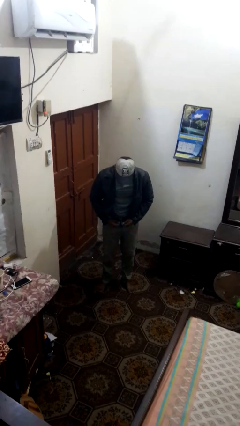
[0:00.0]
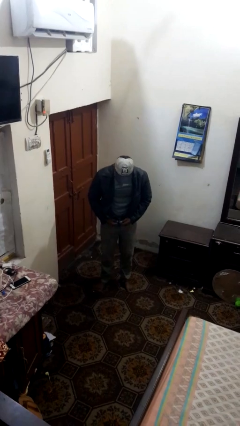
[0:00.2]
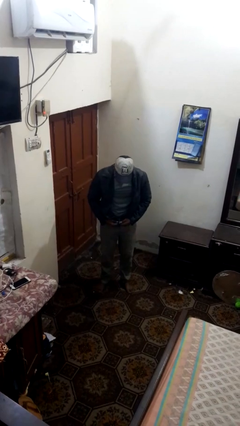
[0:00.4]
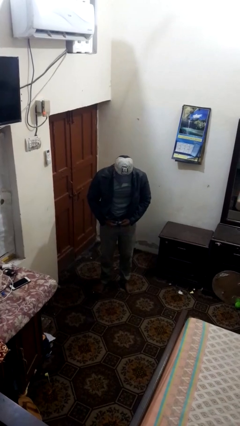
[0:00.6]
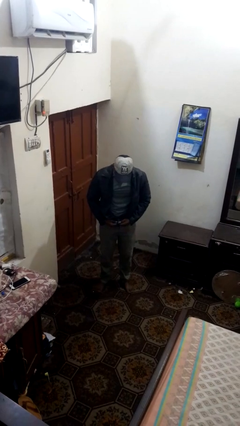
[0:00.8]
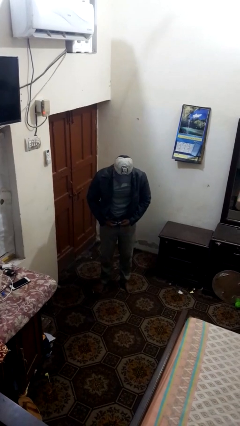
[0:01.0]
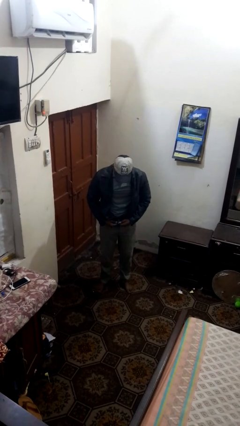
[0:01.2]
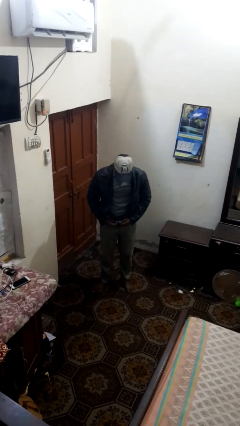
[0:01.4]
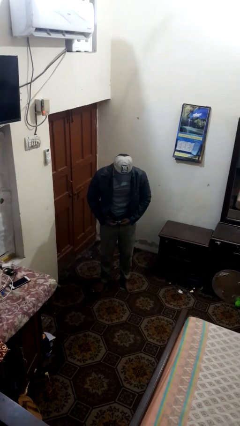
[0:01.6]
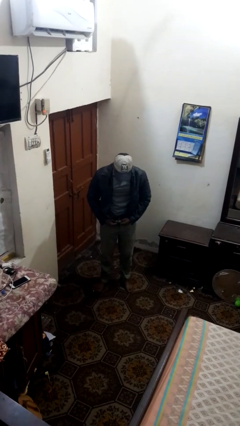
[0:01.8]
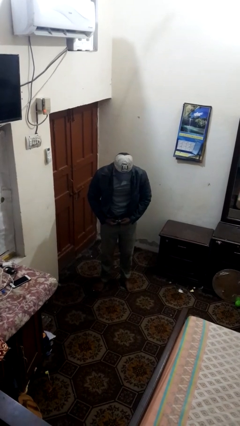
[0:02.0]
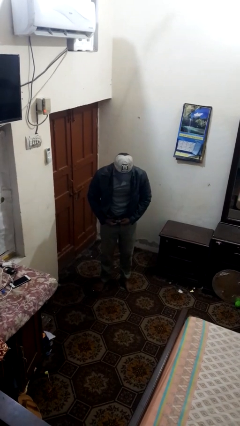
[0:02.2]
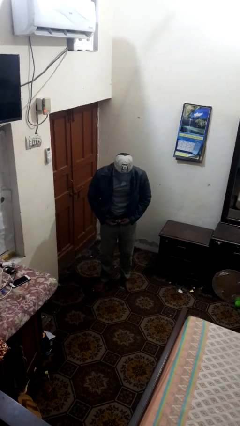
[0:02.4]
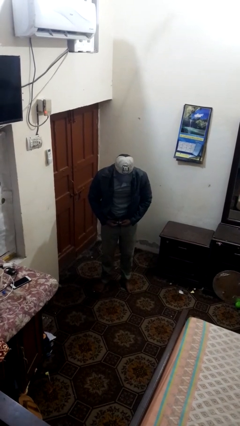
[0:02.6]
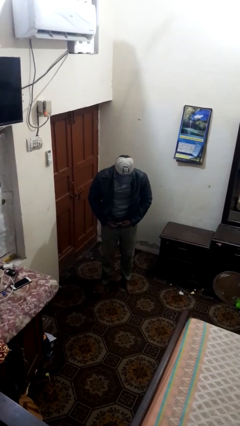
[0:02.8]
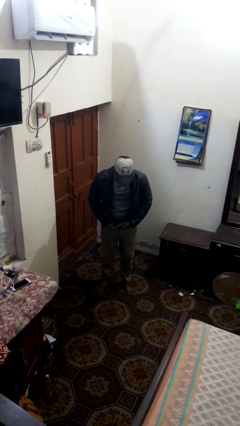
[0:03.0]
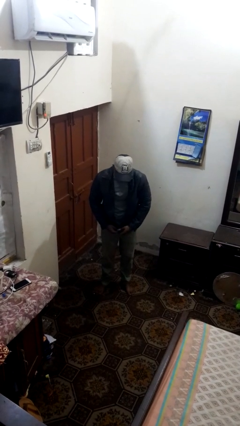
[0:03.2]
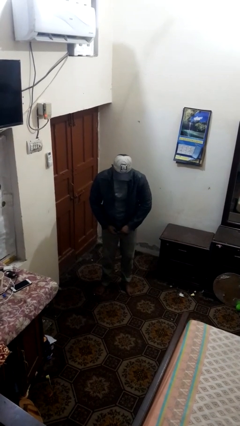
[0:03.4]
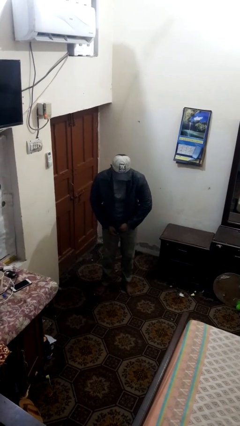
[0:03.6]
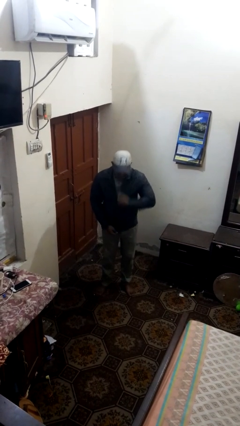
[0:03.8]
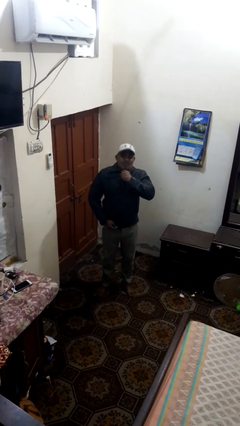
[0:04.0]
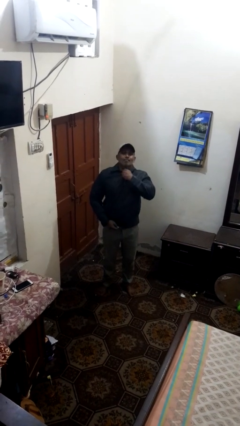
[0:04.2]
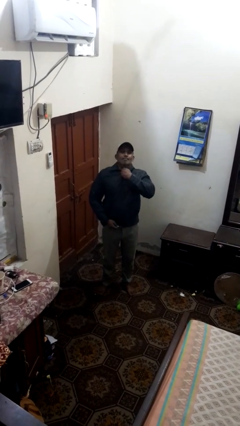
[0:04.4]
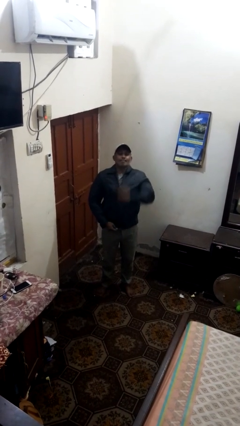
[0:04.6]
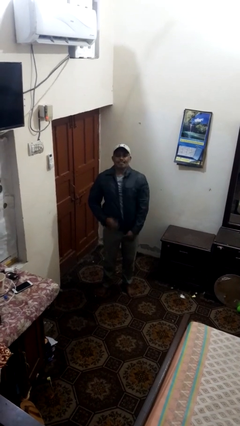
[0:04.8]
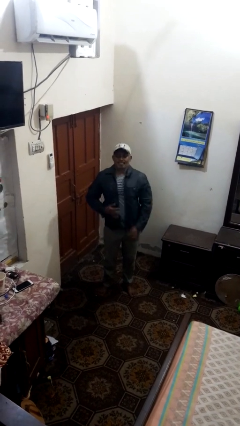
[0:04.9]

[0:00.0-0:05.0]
person zips up jacket

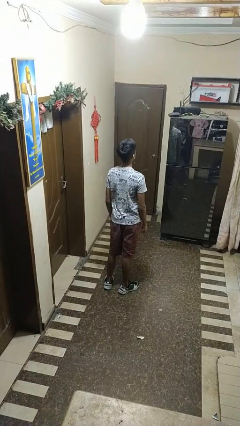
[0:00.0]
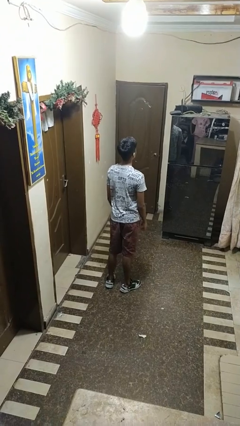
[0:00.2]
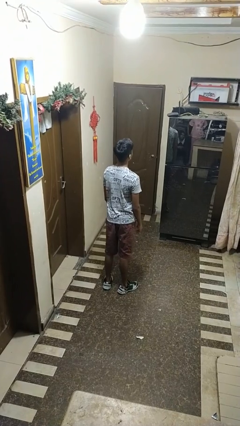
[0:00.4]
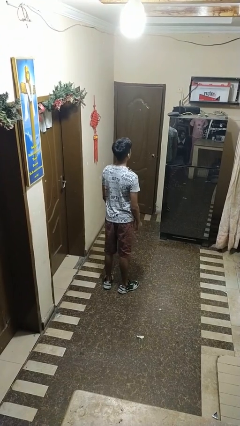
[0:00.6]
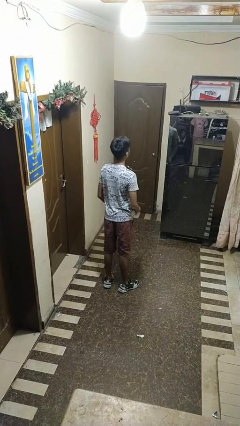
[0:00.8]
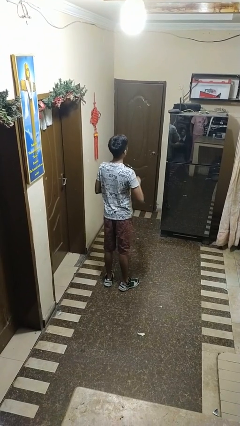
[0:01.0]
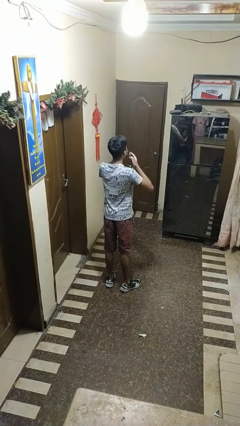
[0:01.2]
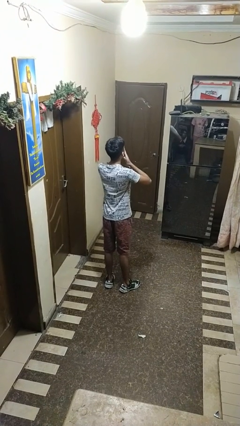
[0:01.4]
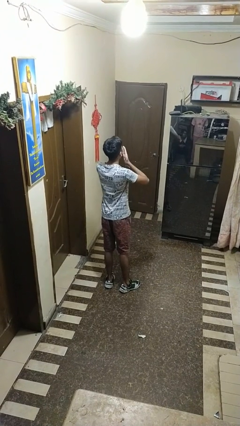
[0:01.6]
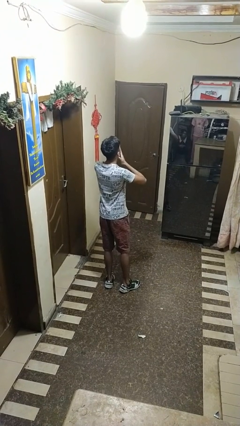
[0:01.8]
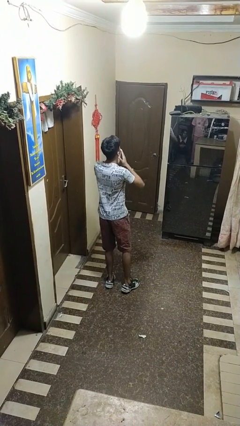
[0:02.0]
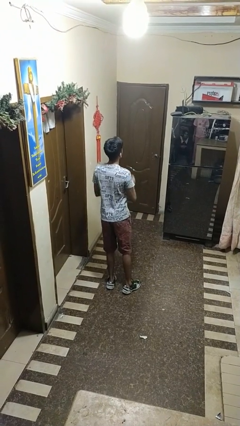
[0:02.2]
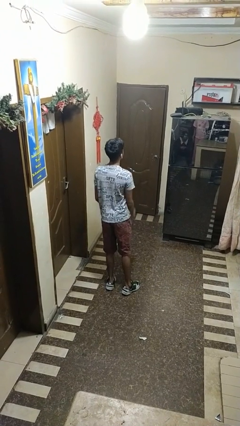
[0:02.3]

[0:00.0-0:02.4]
person yawns

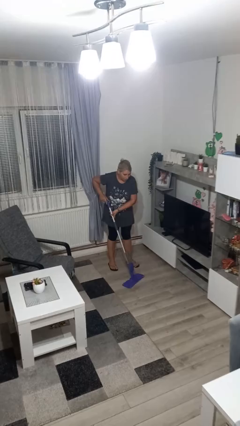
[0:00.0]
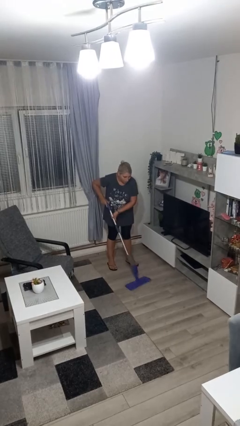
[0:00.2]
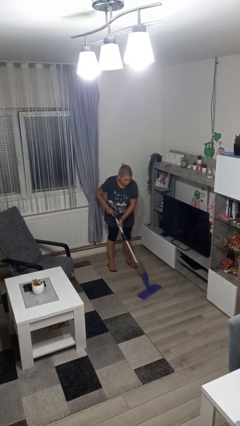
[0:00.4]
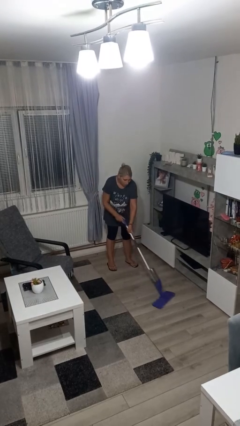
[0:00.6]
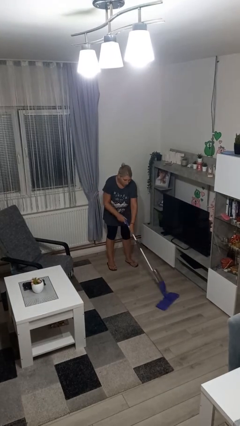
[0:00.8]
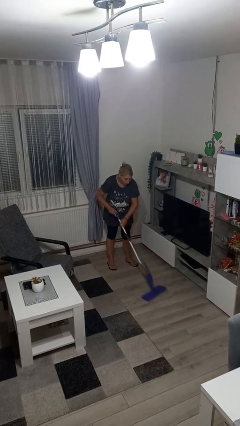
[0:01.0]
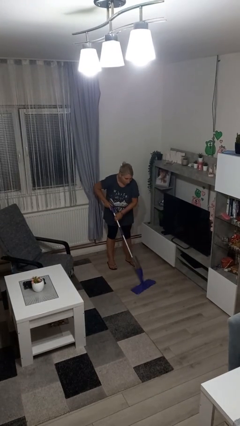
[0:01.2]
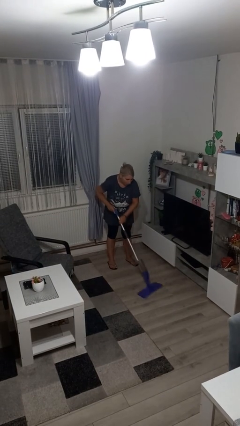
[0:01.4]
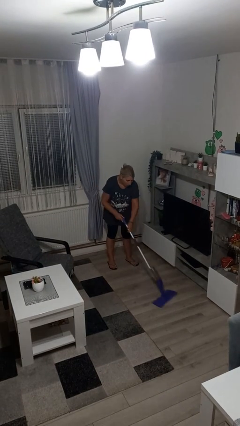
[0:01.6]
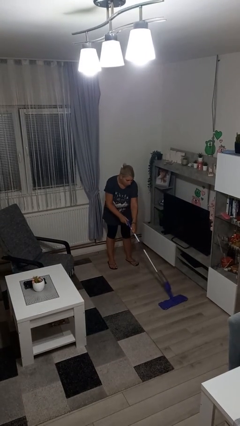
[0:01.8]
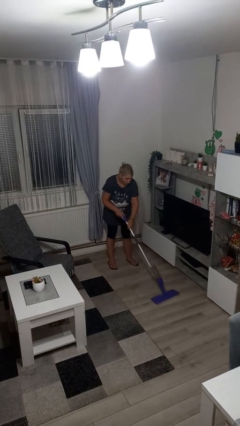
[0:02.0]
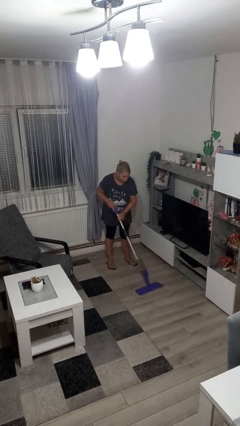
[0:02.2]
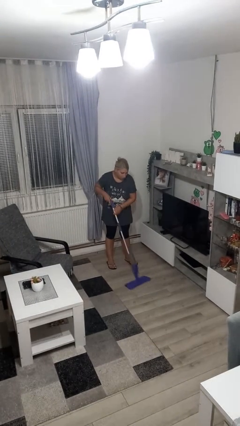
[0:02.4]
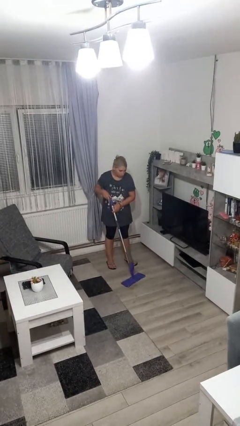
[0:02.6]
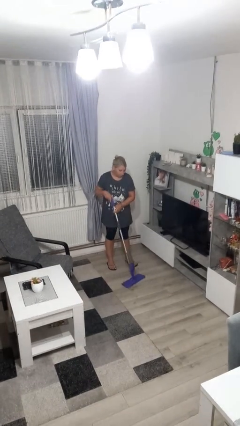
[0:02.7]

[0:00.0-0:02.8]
person mops

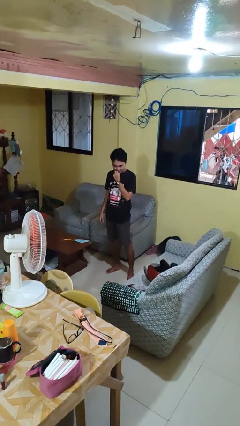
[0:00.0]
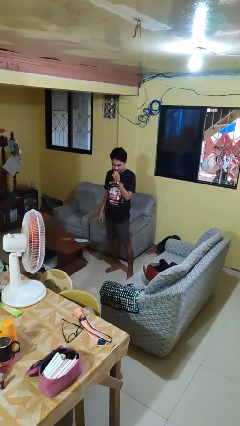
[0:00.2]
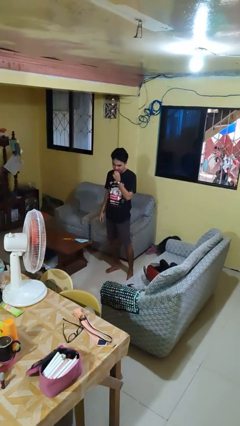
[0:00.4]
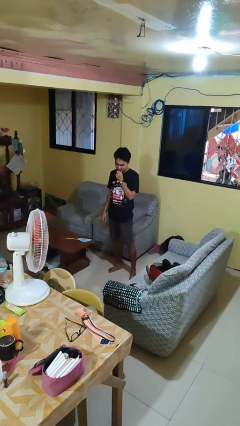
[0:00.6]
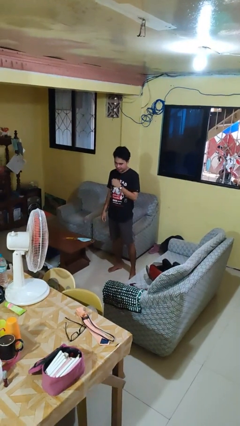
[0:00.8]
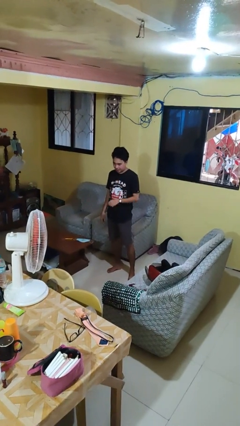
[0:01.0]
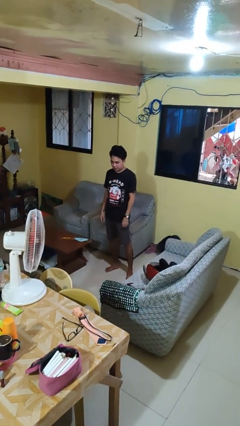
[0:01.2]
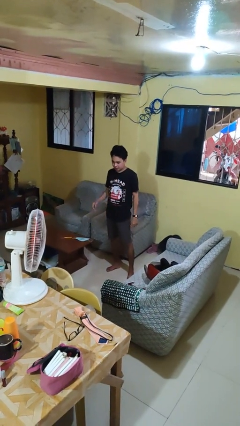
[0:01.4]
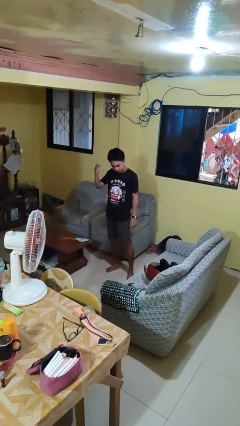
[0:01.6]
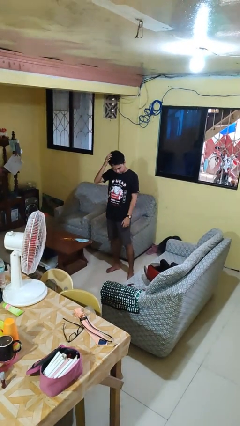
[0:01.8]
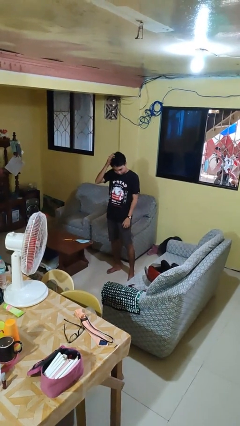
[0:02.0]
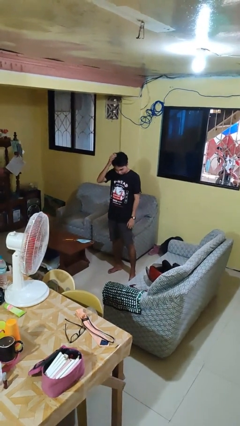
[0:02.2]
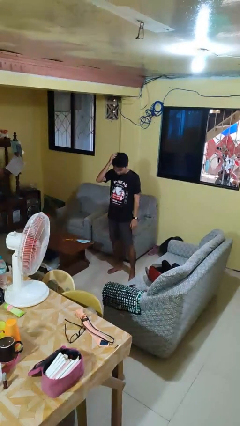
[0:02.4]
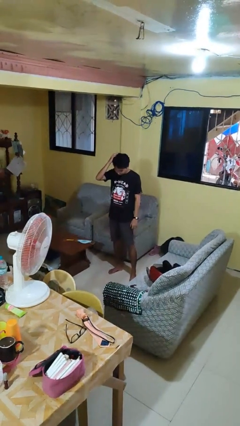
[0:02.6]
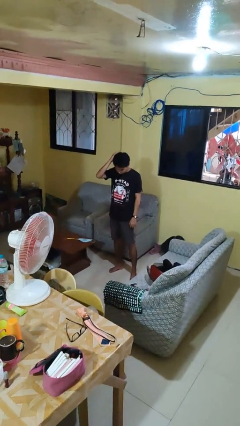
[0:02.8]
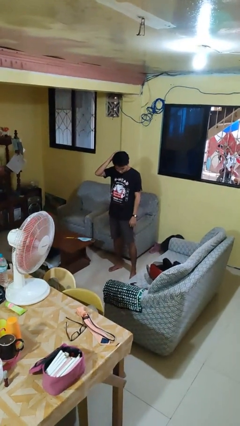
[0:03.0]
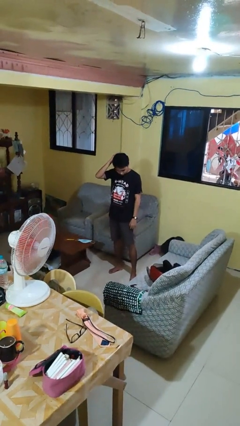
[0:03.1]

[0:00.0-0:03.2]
person pats head

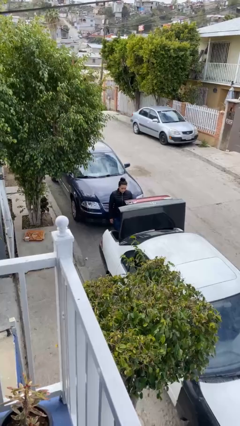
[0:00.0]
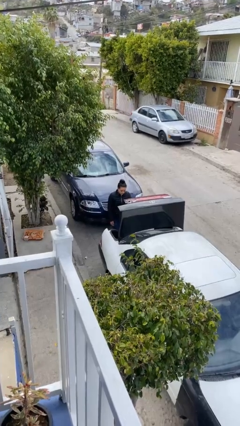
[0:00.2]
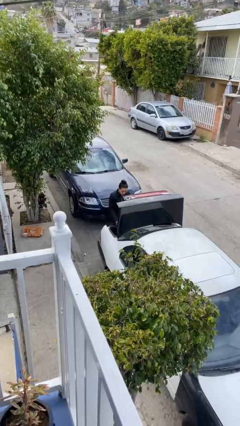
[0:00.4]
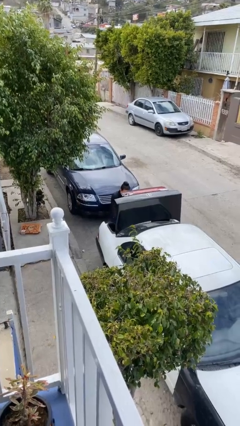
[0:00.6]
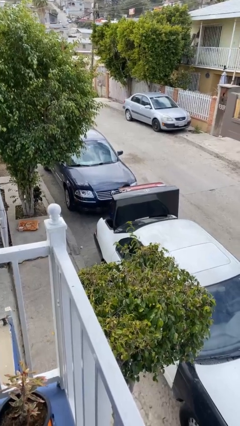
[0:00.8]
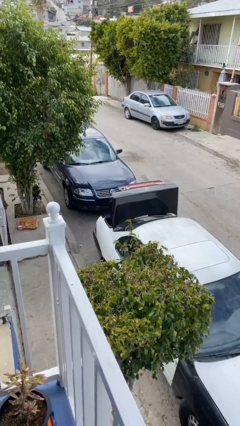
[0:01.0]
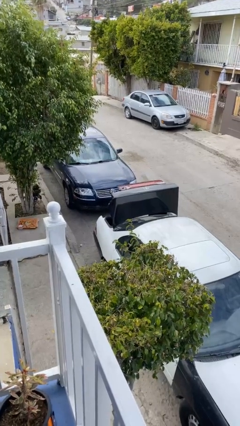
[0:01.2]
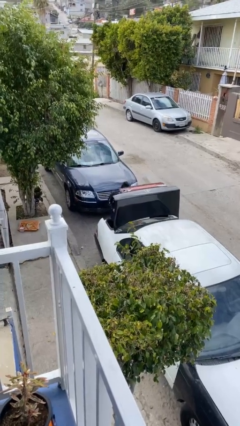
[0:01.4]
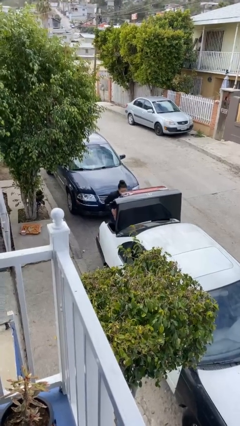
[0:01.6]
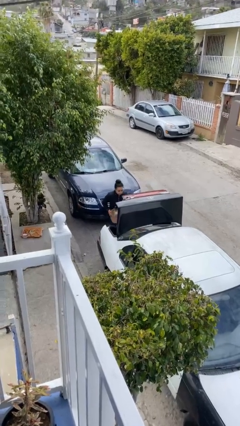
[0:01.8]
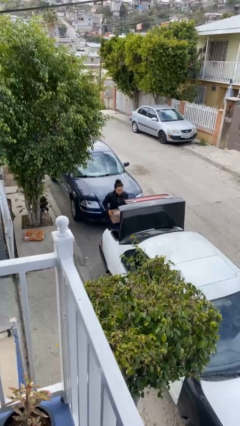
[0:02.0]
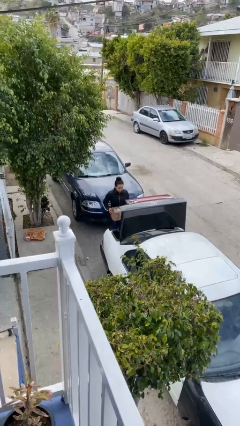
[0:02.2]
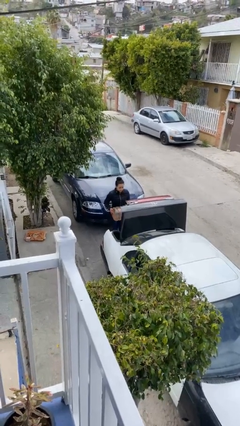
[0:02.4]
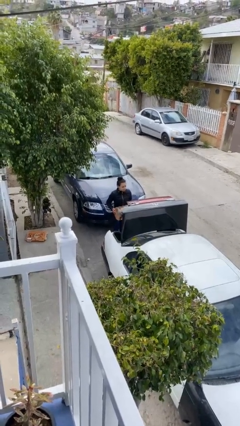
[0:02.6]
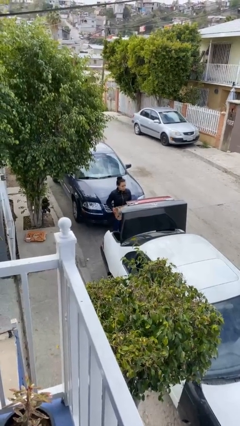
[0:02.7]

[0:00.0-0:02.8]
person unloads car

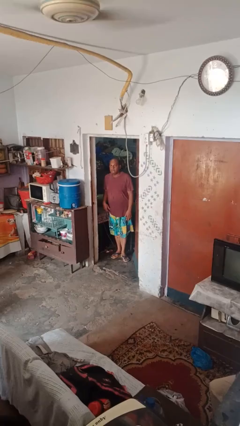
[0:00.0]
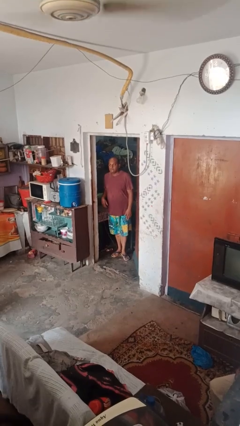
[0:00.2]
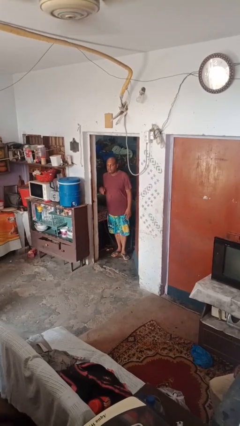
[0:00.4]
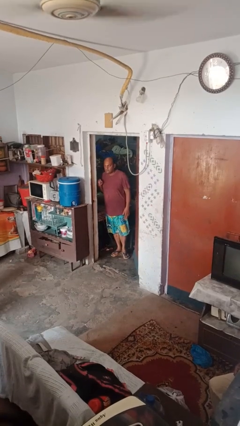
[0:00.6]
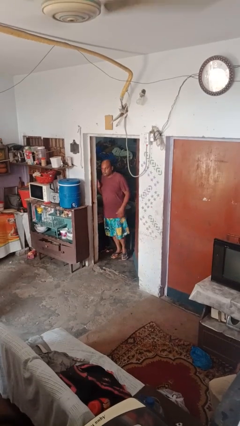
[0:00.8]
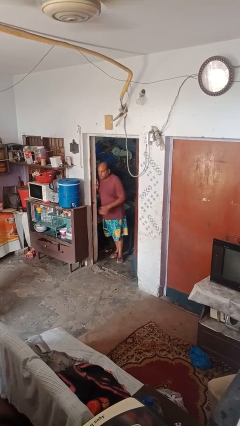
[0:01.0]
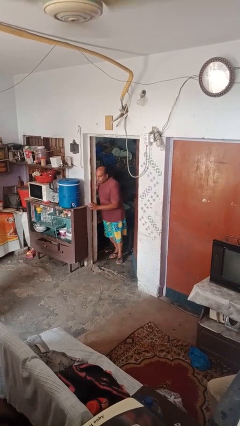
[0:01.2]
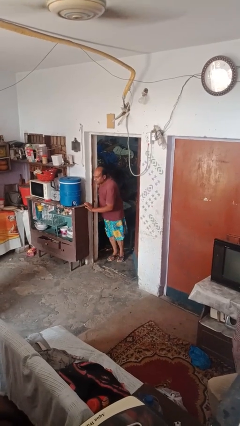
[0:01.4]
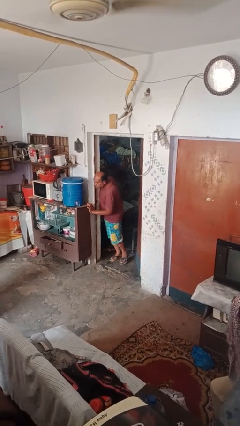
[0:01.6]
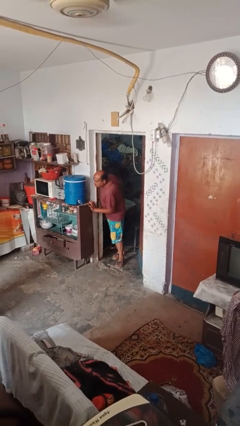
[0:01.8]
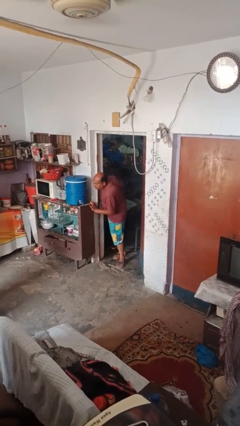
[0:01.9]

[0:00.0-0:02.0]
person bumps into wall
